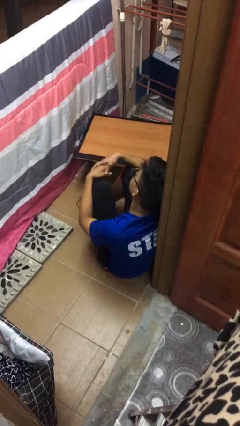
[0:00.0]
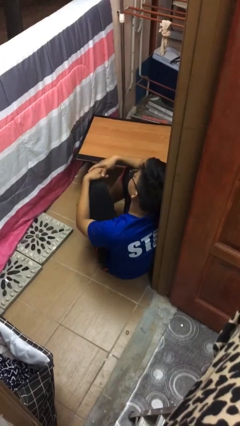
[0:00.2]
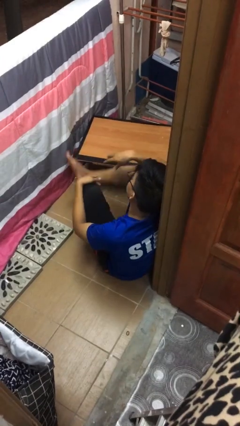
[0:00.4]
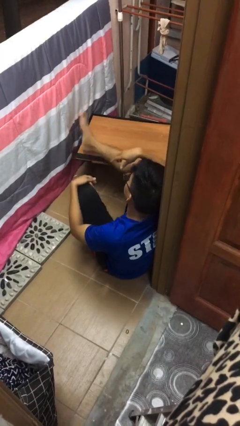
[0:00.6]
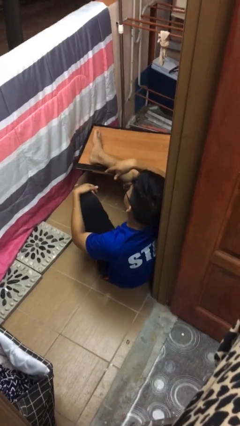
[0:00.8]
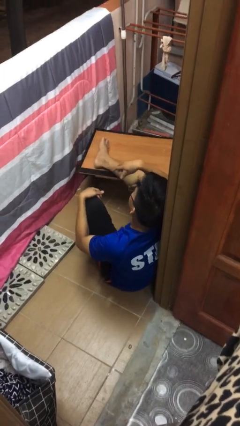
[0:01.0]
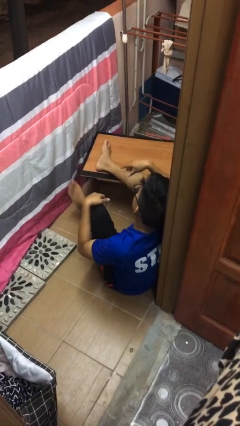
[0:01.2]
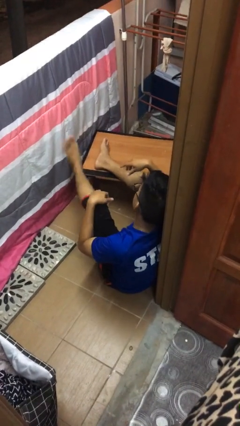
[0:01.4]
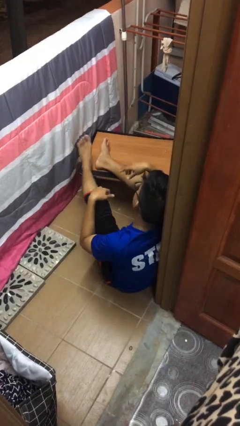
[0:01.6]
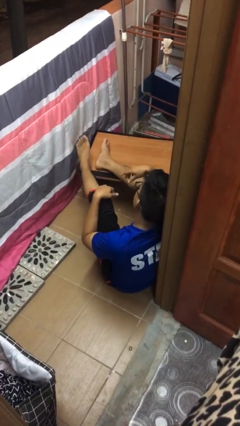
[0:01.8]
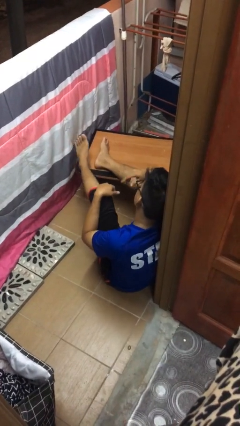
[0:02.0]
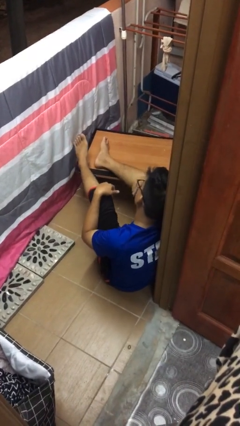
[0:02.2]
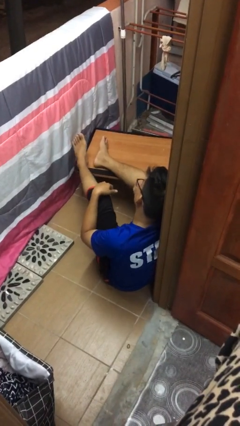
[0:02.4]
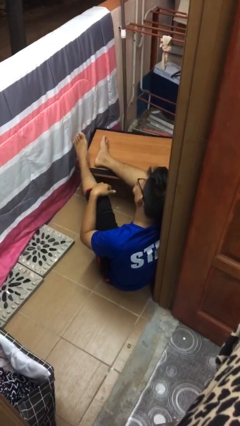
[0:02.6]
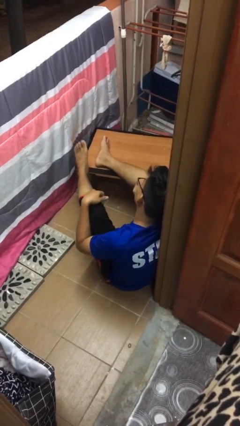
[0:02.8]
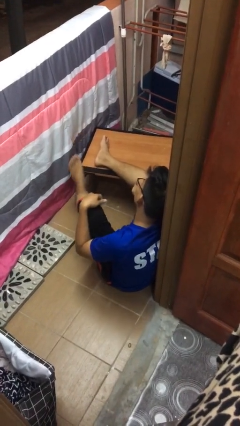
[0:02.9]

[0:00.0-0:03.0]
person puts feet up

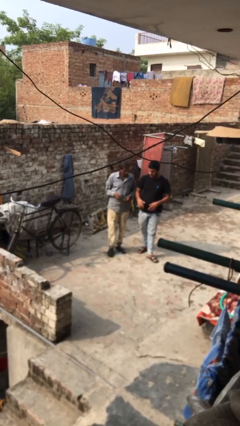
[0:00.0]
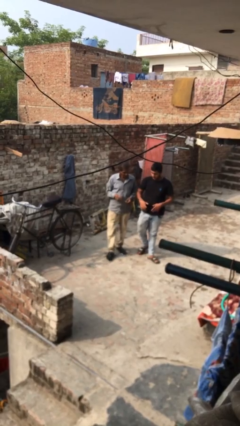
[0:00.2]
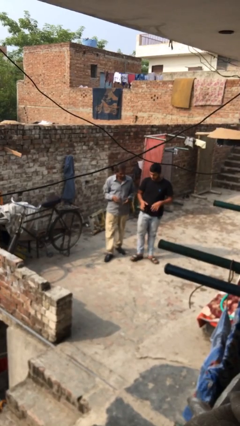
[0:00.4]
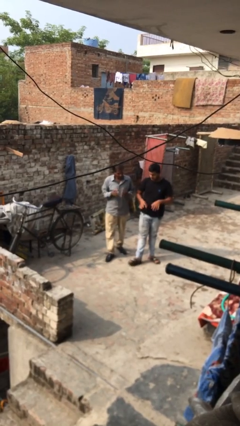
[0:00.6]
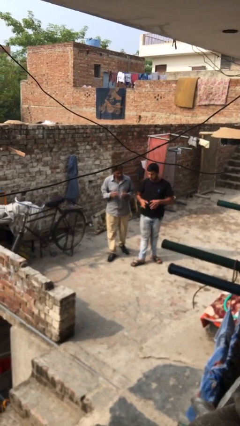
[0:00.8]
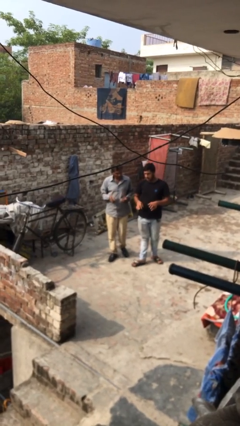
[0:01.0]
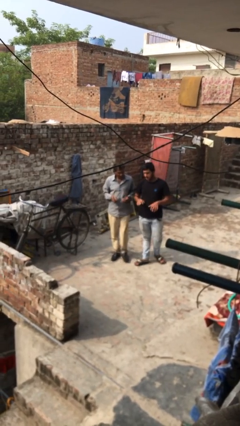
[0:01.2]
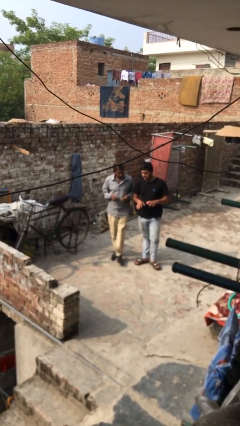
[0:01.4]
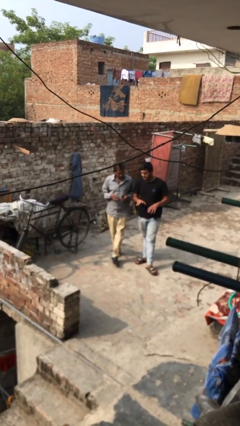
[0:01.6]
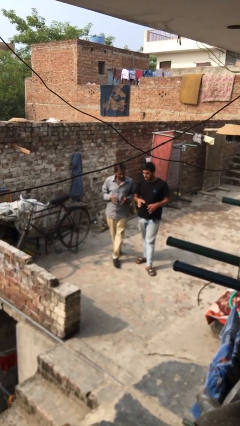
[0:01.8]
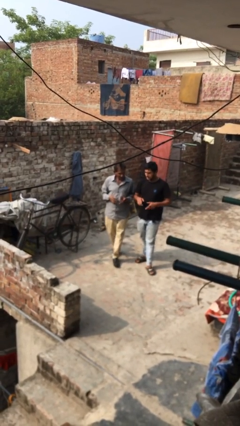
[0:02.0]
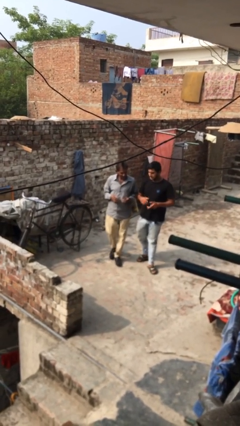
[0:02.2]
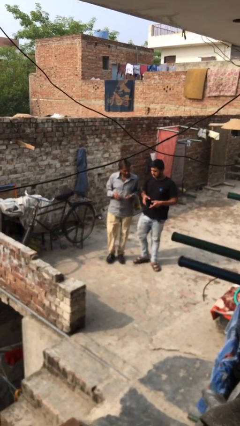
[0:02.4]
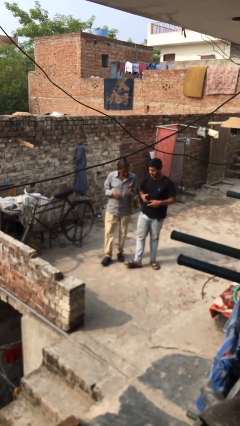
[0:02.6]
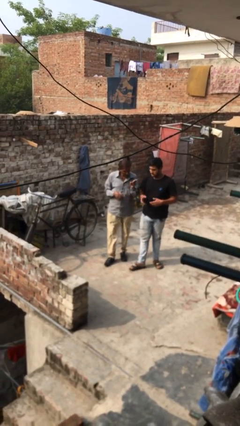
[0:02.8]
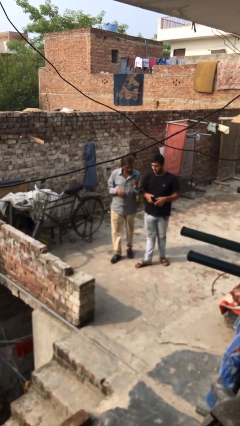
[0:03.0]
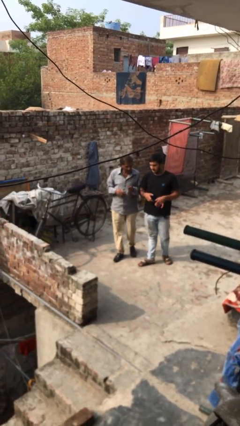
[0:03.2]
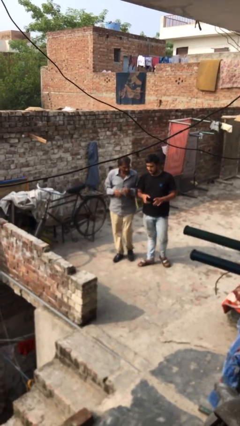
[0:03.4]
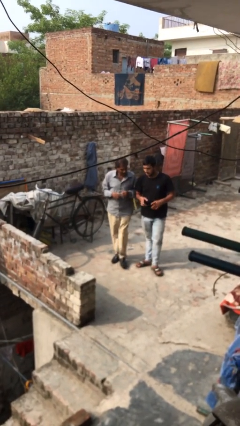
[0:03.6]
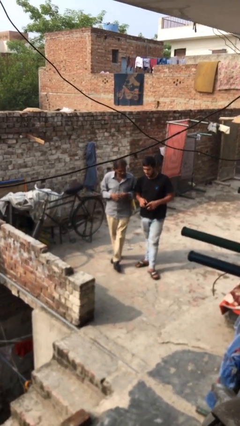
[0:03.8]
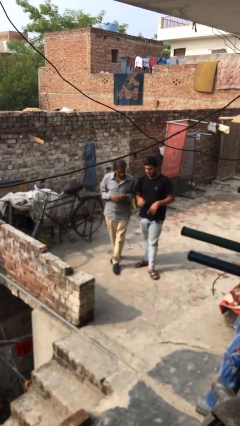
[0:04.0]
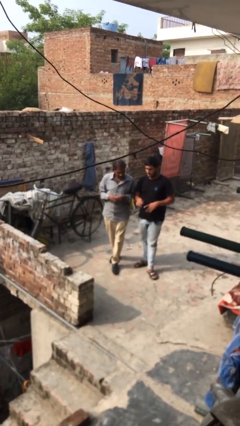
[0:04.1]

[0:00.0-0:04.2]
person talks to person

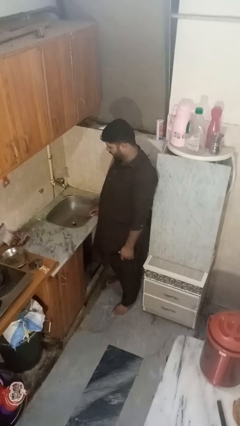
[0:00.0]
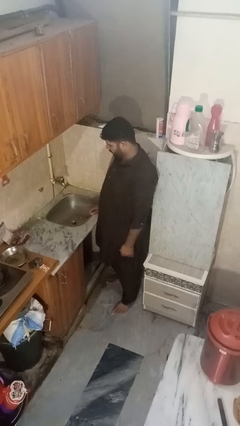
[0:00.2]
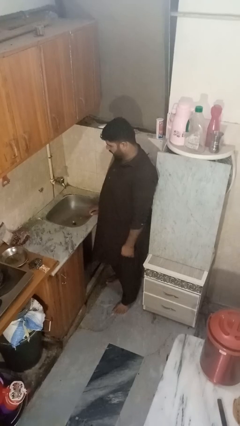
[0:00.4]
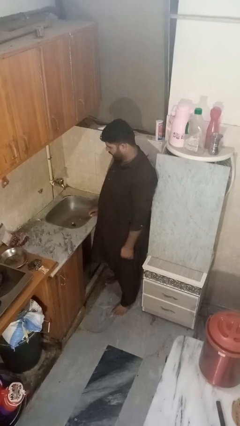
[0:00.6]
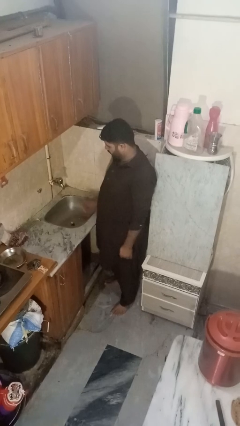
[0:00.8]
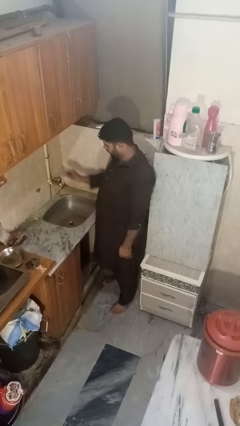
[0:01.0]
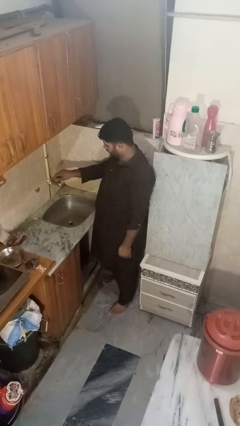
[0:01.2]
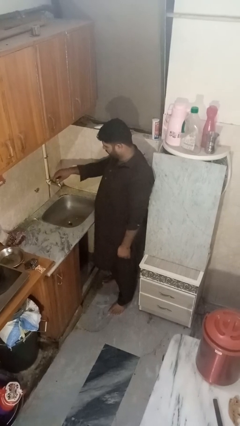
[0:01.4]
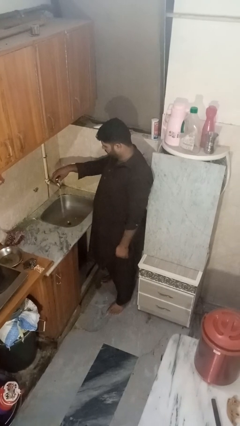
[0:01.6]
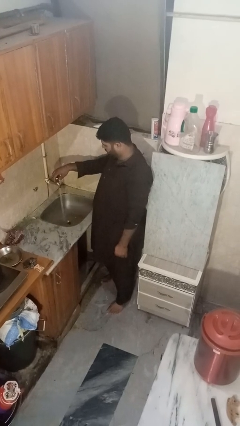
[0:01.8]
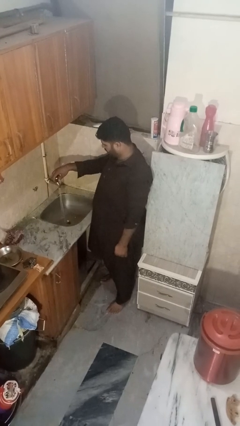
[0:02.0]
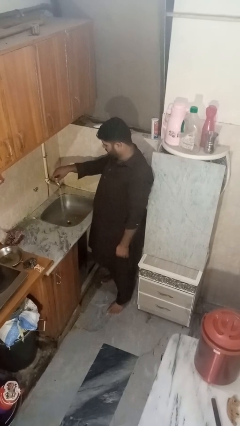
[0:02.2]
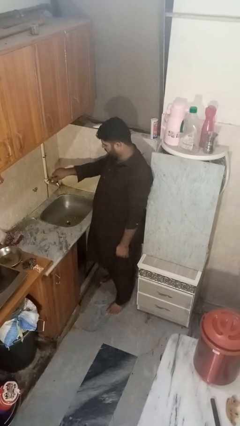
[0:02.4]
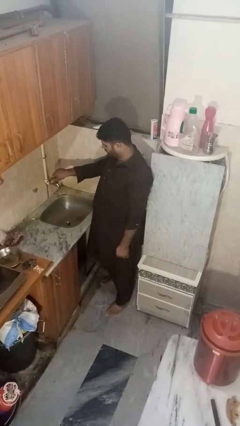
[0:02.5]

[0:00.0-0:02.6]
person turns on faucet

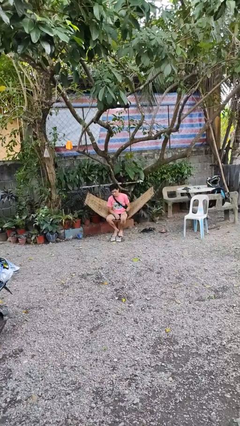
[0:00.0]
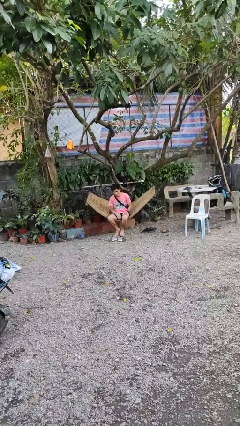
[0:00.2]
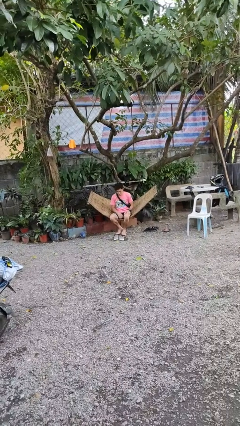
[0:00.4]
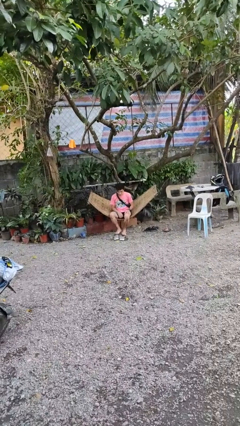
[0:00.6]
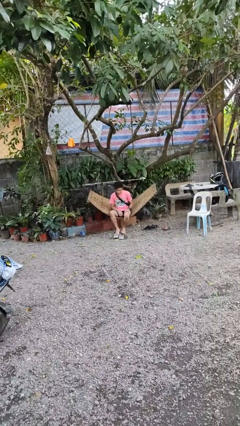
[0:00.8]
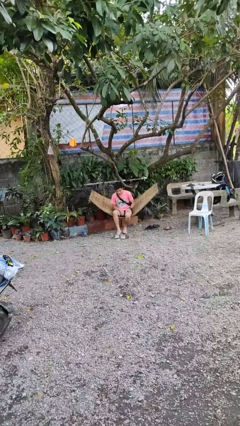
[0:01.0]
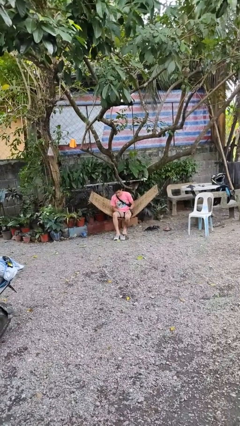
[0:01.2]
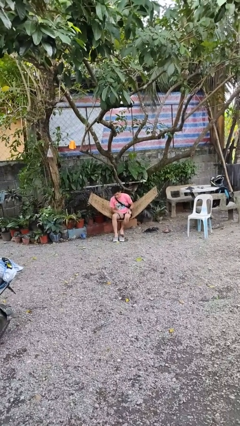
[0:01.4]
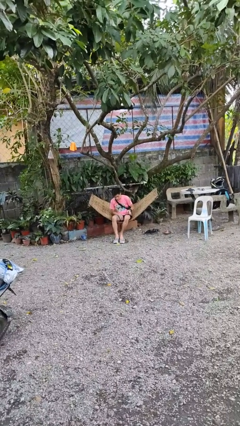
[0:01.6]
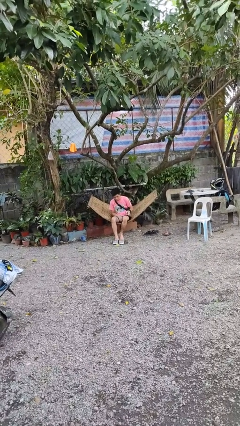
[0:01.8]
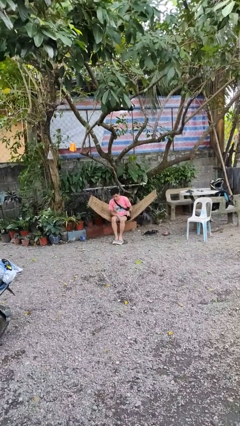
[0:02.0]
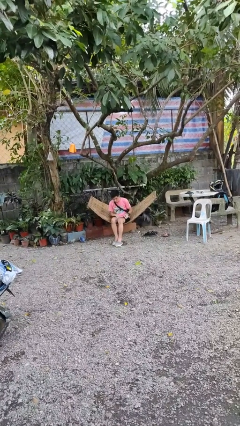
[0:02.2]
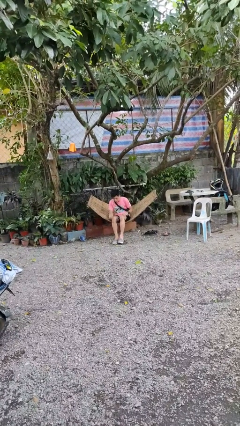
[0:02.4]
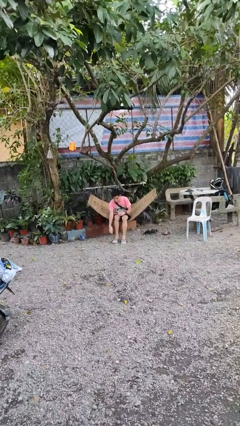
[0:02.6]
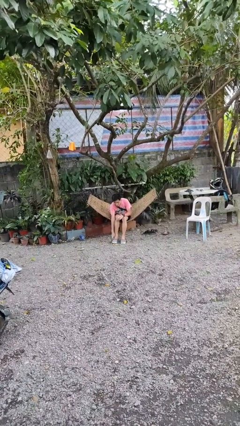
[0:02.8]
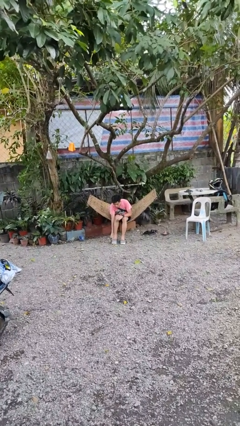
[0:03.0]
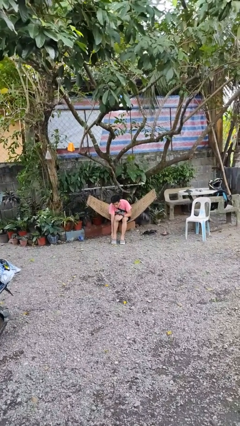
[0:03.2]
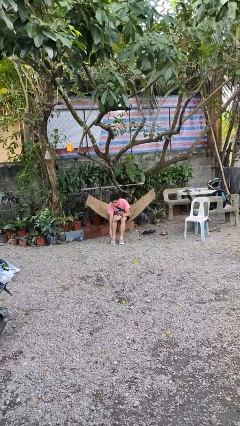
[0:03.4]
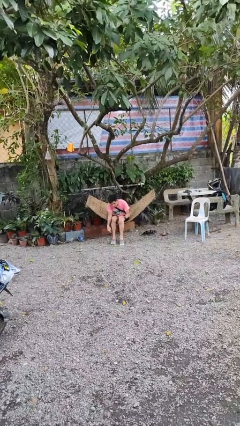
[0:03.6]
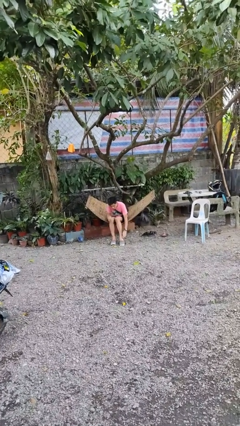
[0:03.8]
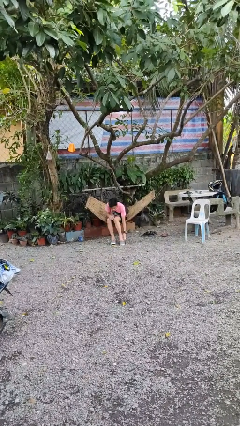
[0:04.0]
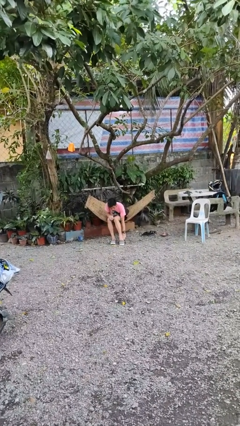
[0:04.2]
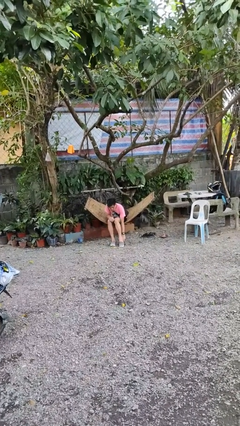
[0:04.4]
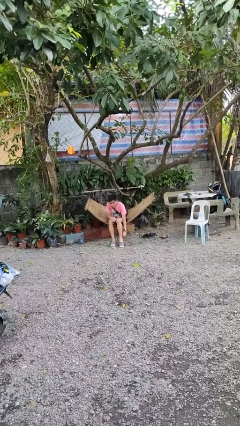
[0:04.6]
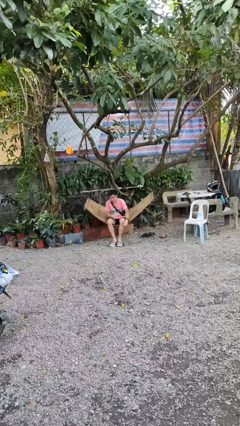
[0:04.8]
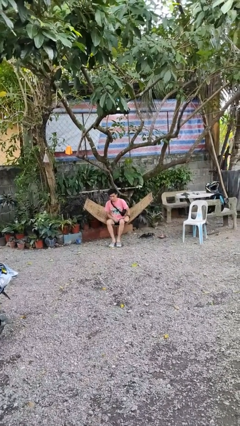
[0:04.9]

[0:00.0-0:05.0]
person puts on shoes

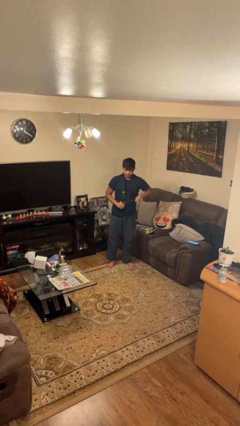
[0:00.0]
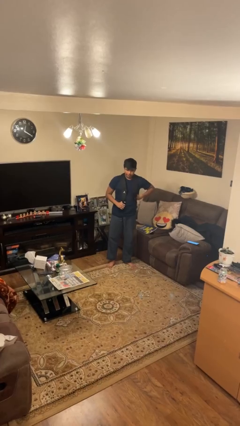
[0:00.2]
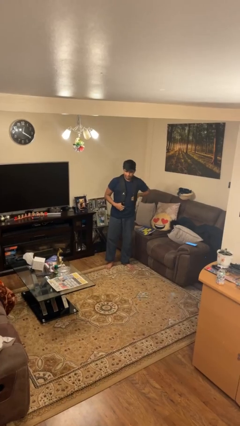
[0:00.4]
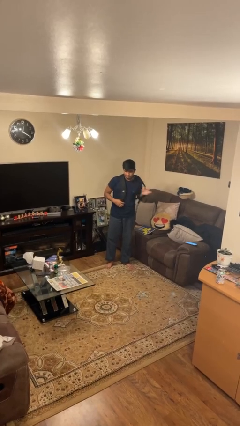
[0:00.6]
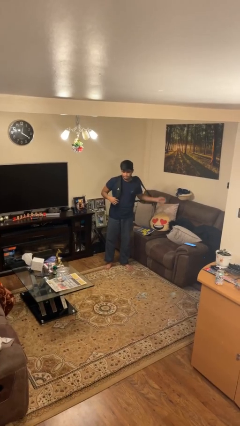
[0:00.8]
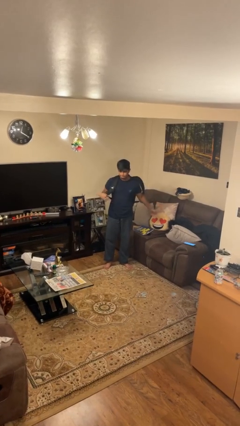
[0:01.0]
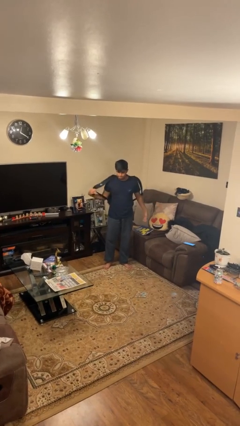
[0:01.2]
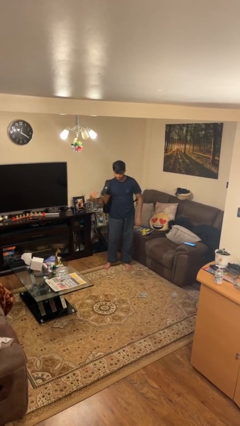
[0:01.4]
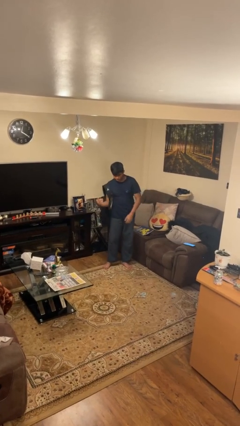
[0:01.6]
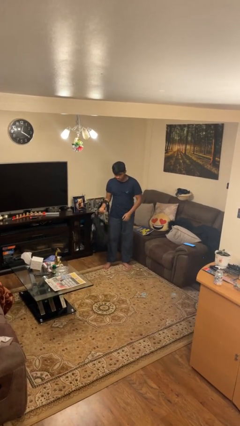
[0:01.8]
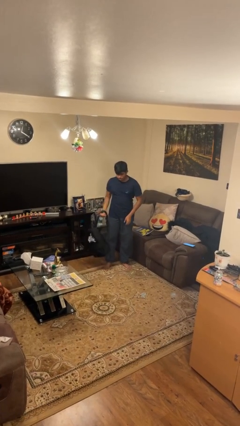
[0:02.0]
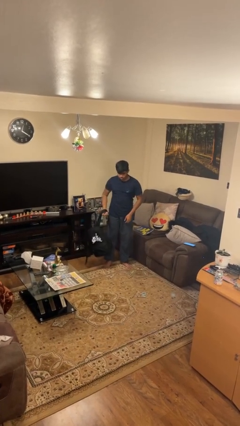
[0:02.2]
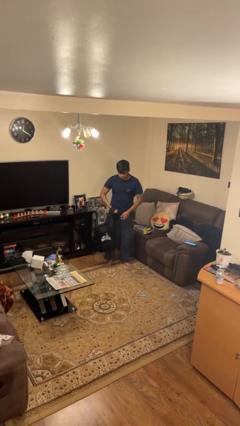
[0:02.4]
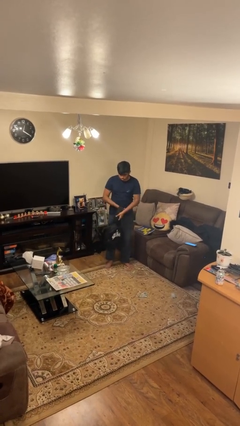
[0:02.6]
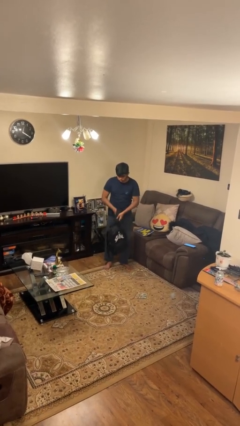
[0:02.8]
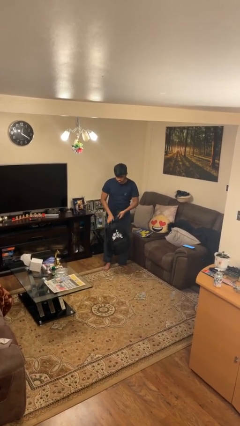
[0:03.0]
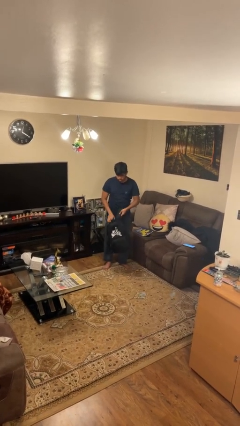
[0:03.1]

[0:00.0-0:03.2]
person takes off backpack
